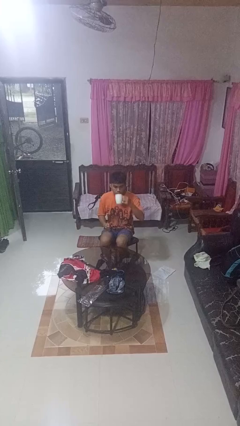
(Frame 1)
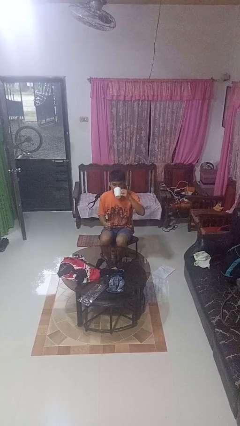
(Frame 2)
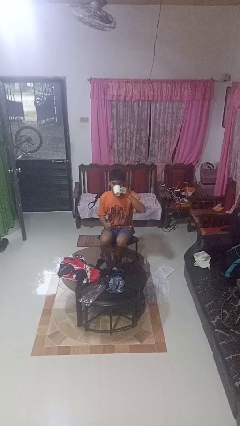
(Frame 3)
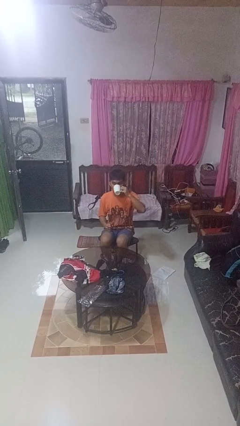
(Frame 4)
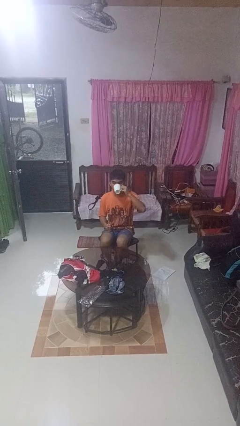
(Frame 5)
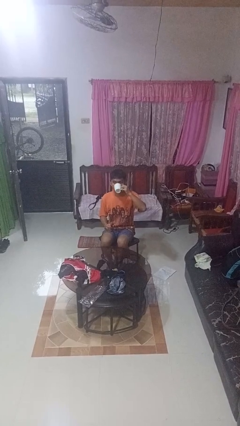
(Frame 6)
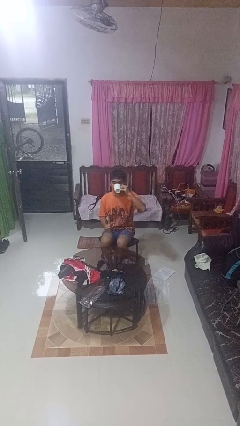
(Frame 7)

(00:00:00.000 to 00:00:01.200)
person drinks from mug

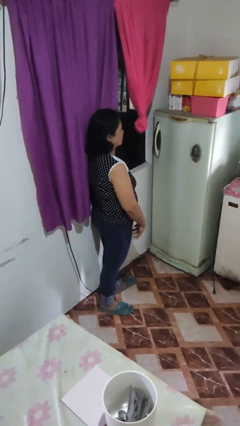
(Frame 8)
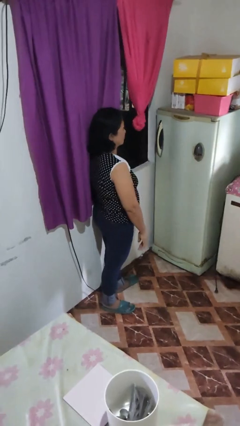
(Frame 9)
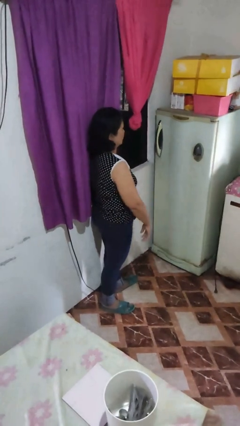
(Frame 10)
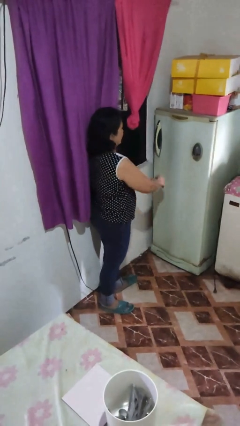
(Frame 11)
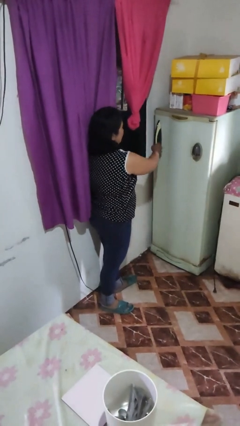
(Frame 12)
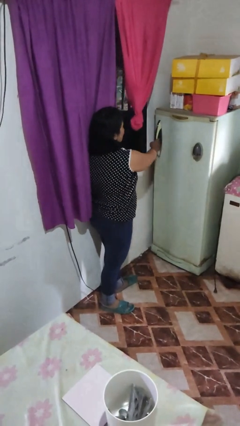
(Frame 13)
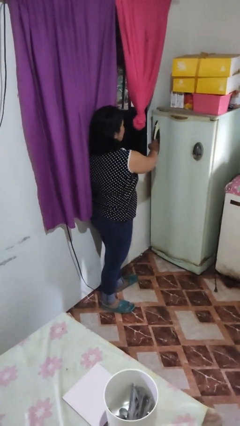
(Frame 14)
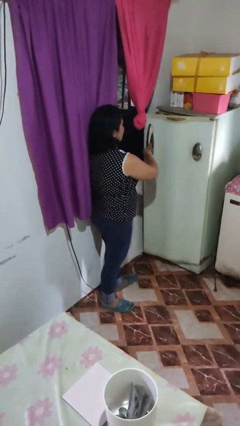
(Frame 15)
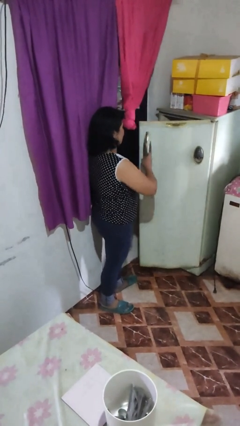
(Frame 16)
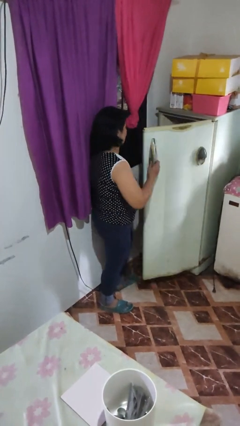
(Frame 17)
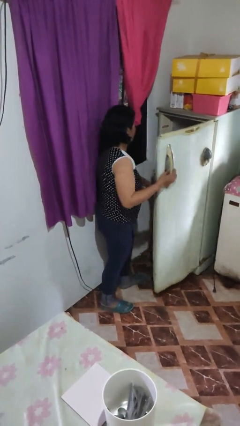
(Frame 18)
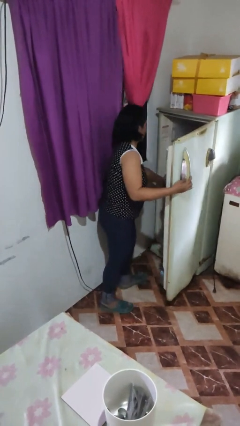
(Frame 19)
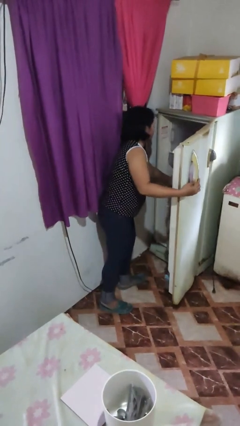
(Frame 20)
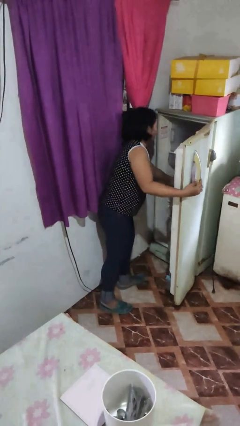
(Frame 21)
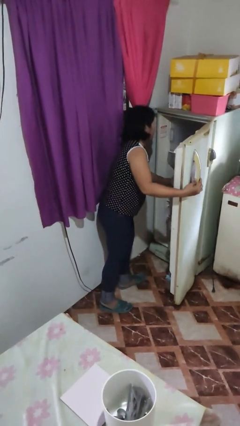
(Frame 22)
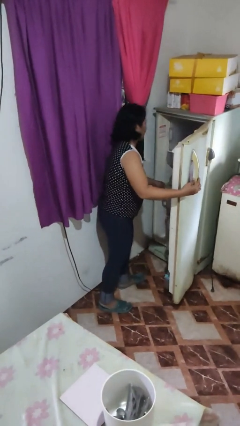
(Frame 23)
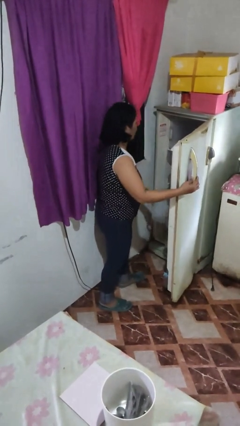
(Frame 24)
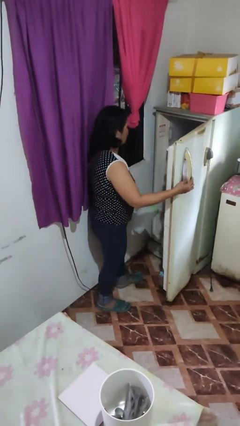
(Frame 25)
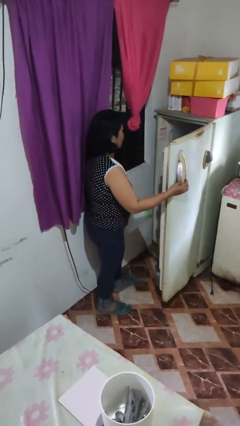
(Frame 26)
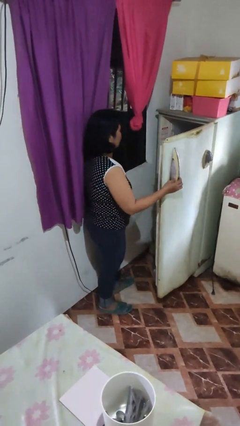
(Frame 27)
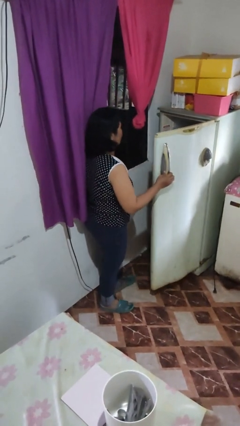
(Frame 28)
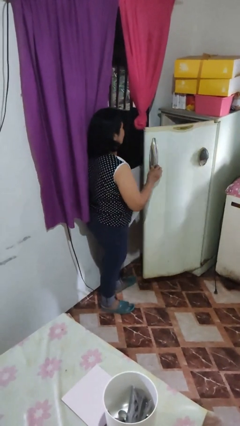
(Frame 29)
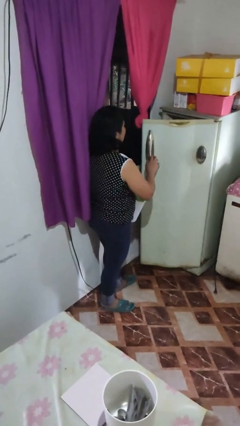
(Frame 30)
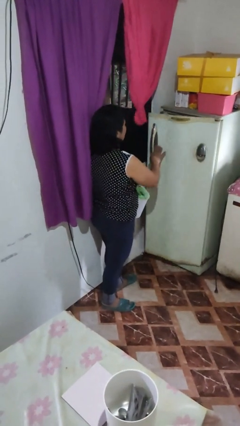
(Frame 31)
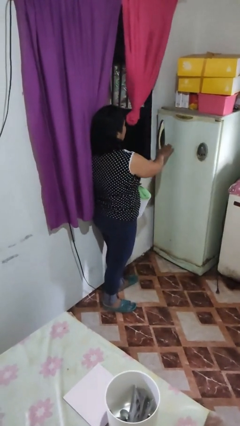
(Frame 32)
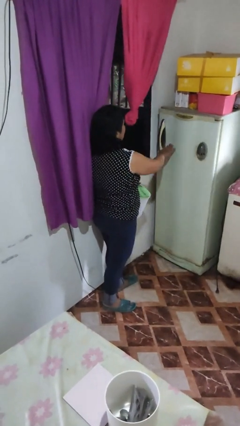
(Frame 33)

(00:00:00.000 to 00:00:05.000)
person takes object from refrigerator

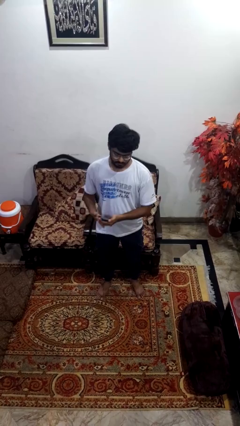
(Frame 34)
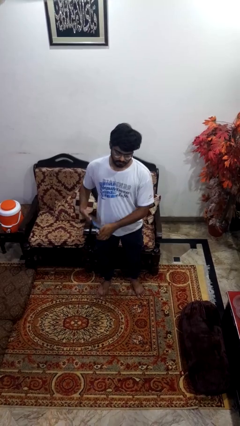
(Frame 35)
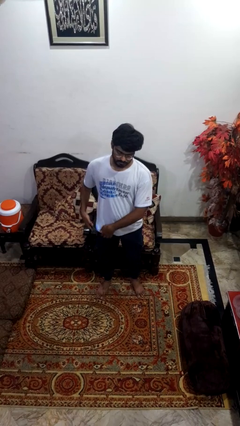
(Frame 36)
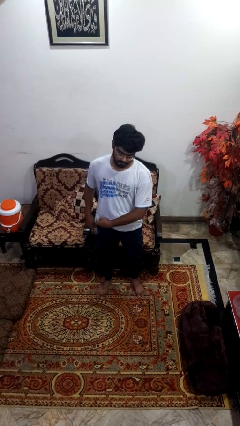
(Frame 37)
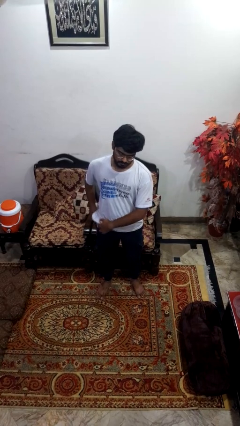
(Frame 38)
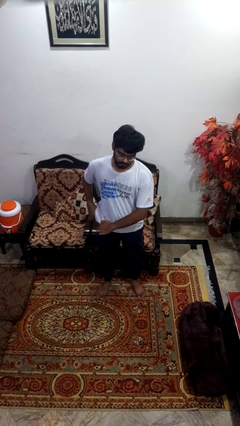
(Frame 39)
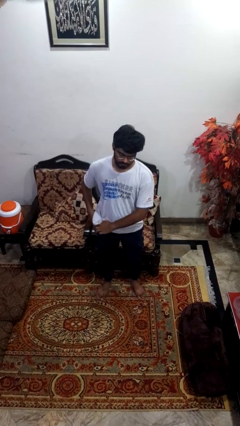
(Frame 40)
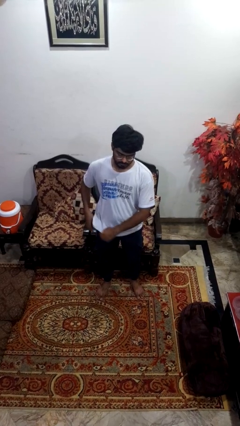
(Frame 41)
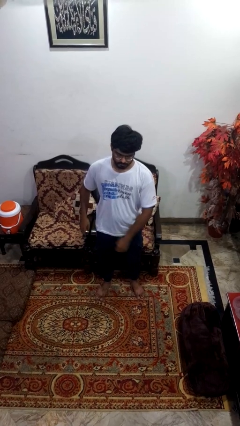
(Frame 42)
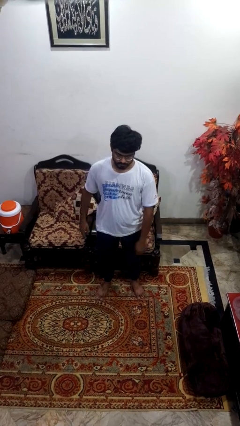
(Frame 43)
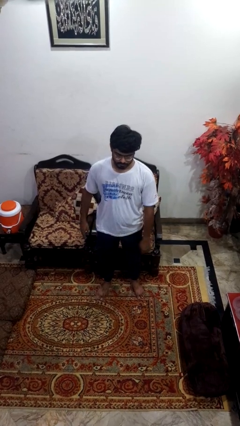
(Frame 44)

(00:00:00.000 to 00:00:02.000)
person puts phone into pocket

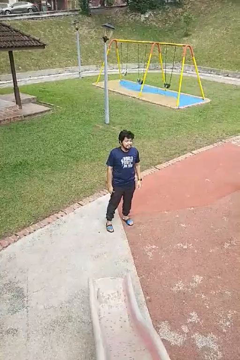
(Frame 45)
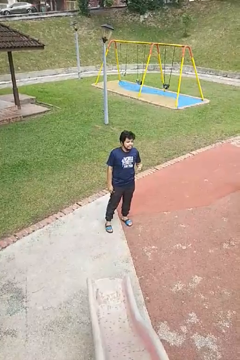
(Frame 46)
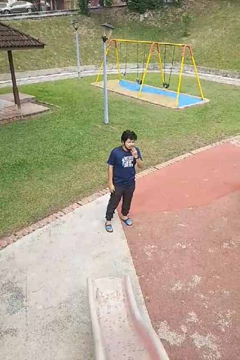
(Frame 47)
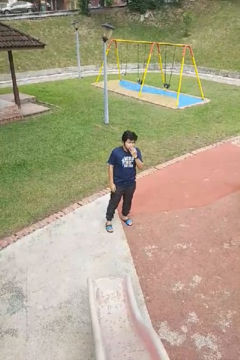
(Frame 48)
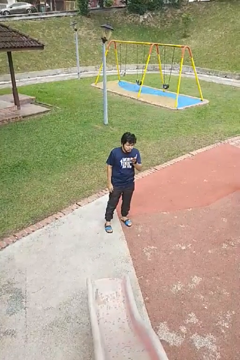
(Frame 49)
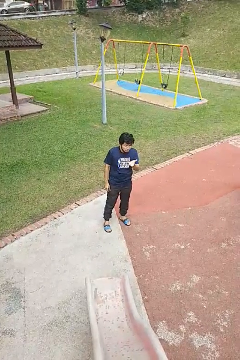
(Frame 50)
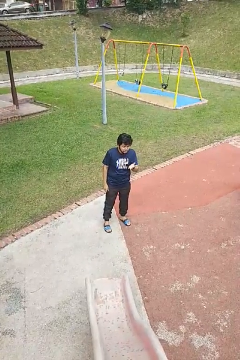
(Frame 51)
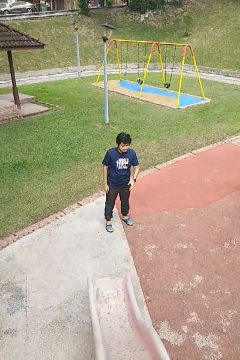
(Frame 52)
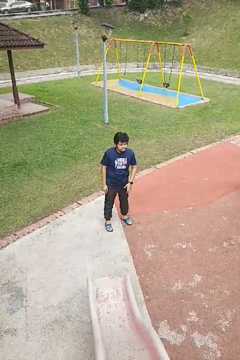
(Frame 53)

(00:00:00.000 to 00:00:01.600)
person gestures blow kiss

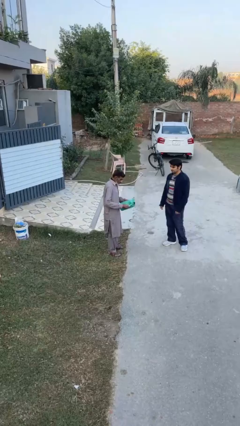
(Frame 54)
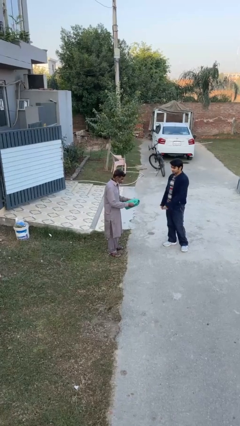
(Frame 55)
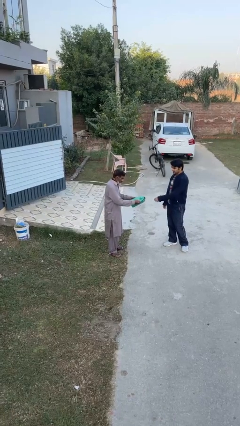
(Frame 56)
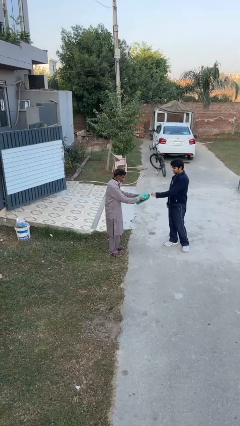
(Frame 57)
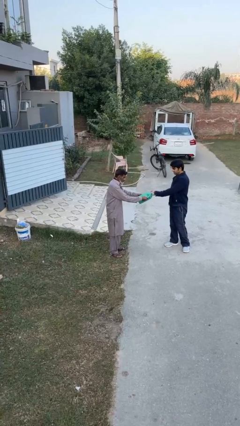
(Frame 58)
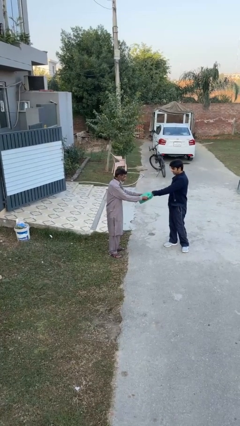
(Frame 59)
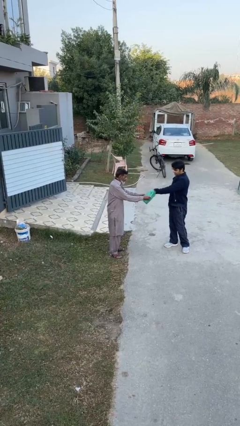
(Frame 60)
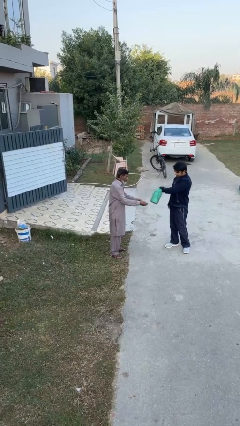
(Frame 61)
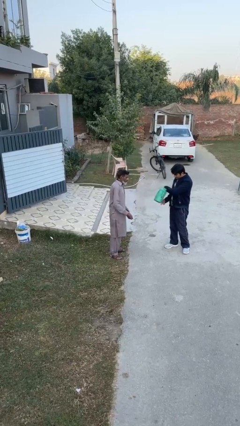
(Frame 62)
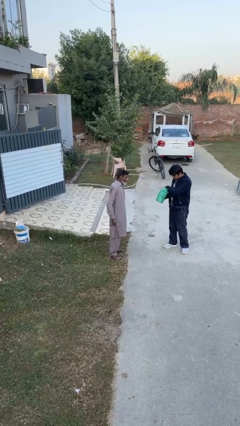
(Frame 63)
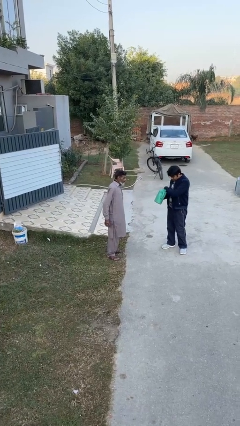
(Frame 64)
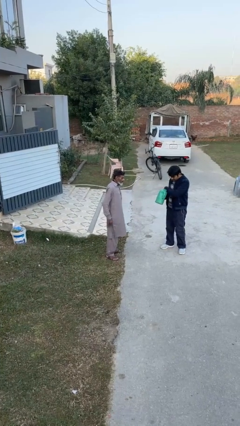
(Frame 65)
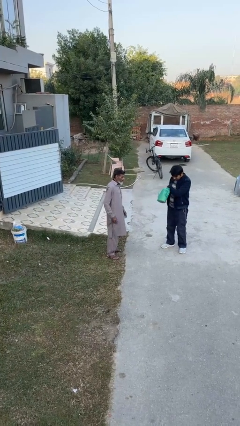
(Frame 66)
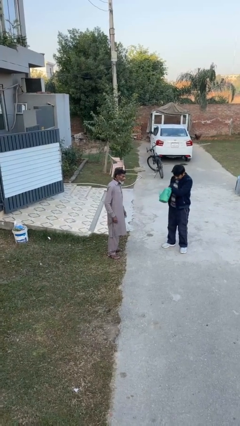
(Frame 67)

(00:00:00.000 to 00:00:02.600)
person transfers object to person

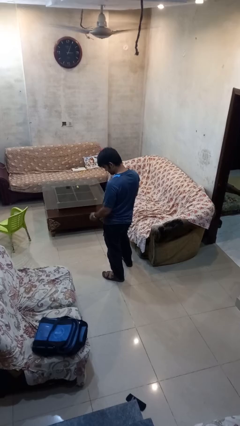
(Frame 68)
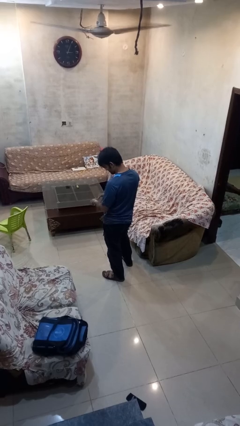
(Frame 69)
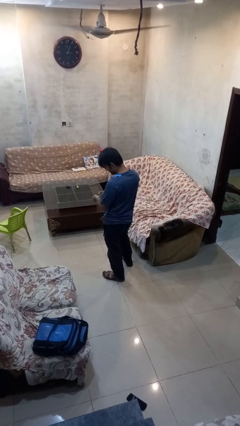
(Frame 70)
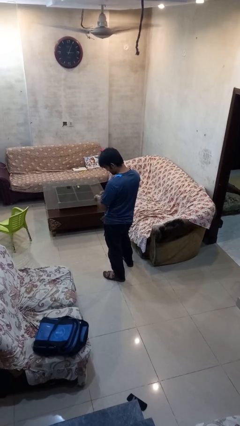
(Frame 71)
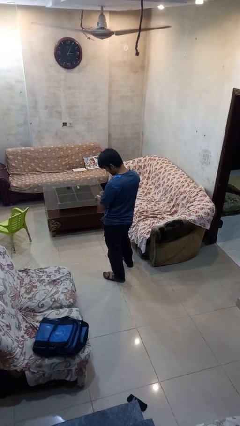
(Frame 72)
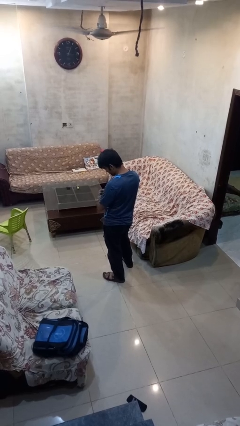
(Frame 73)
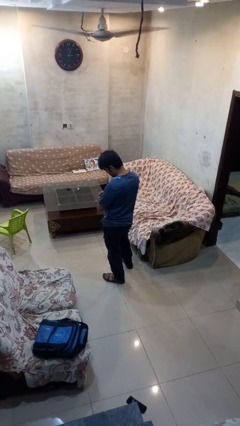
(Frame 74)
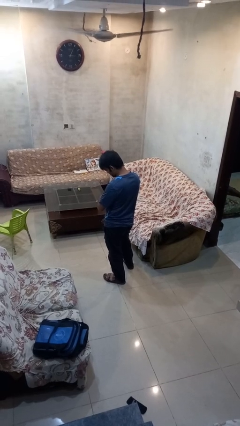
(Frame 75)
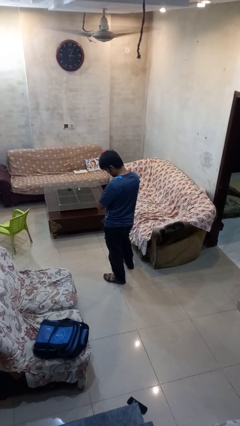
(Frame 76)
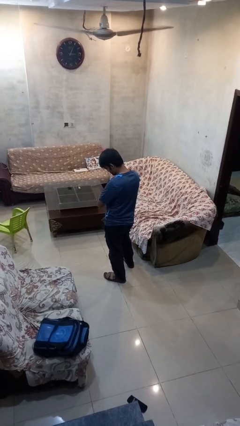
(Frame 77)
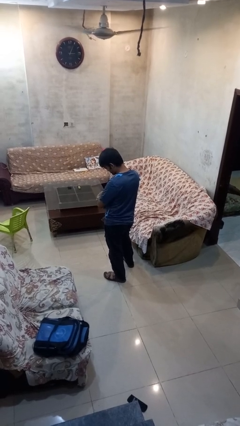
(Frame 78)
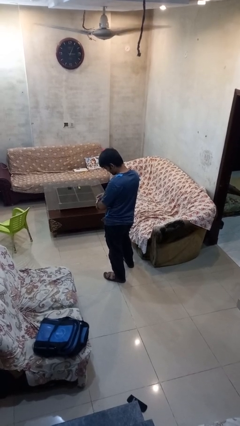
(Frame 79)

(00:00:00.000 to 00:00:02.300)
person takes off wristwatch

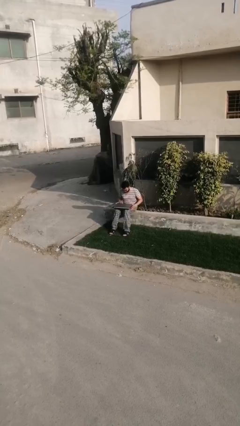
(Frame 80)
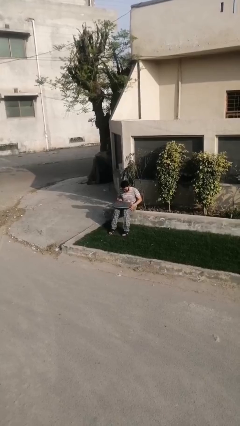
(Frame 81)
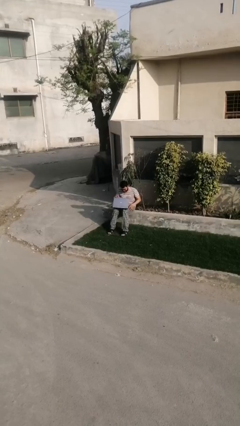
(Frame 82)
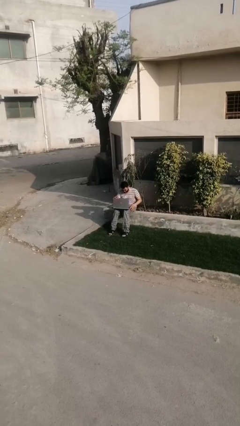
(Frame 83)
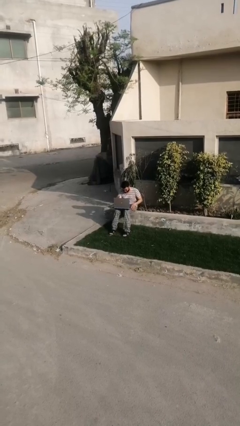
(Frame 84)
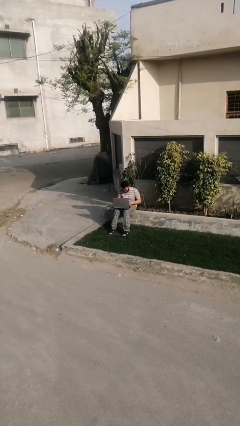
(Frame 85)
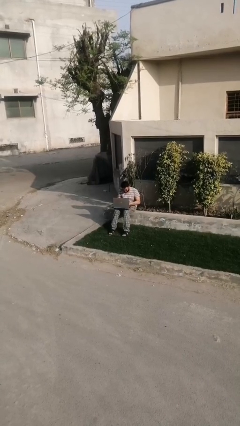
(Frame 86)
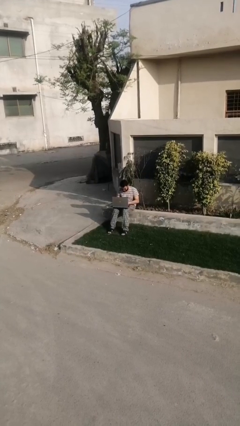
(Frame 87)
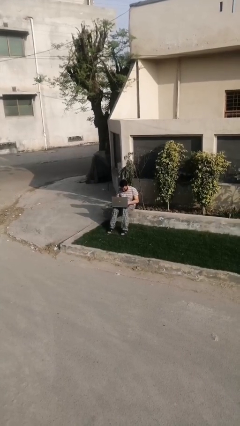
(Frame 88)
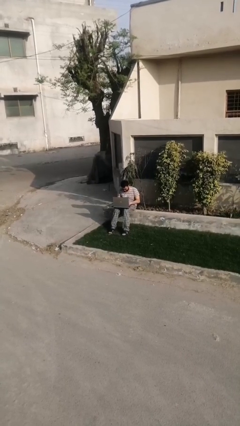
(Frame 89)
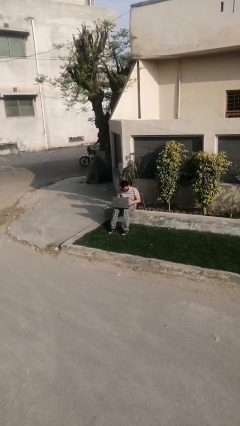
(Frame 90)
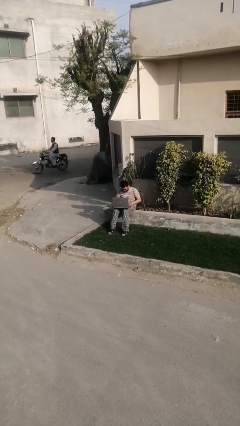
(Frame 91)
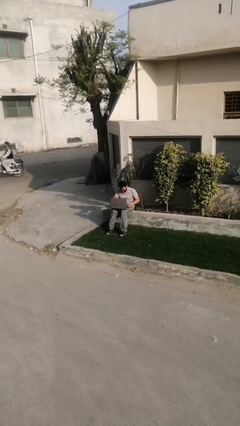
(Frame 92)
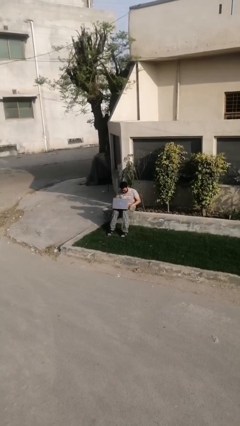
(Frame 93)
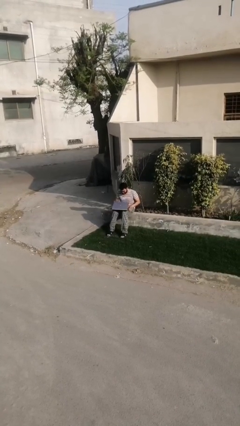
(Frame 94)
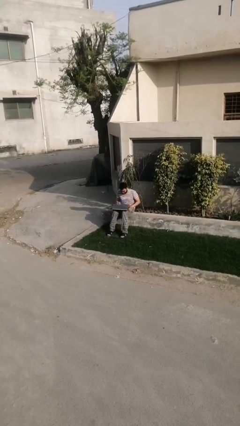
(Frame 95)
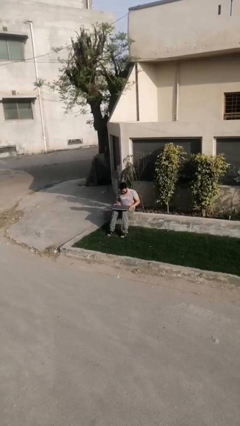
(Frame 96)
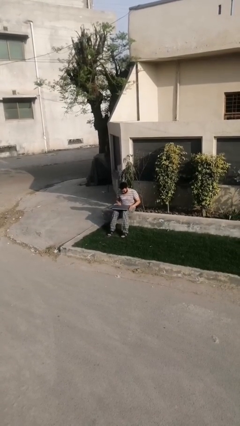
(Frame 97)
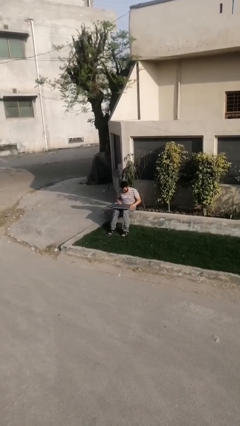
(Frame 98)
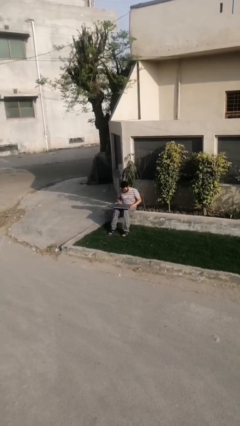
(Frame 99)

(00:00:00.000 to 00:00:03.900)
person interacts with laptop
